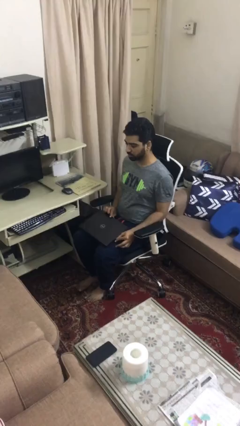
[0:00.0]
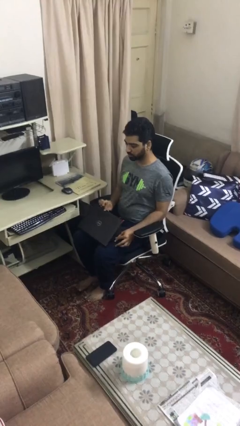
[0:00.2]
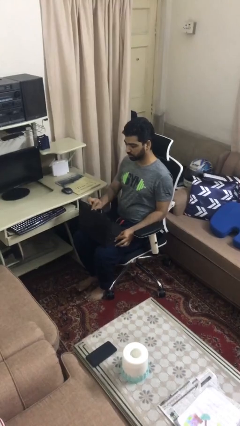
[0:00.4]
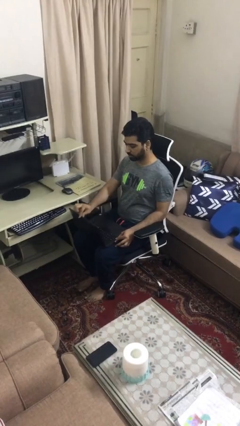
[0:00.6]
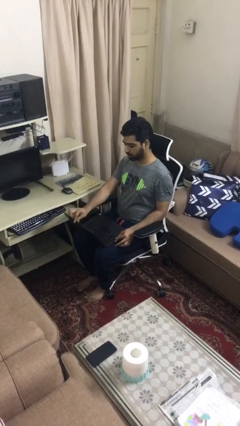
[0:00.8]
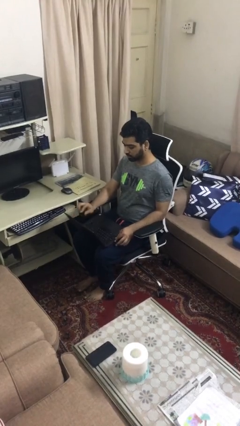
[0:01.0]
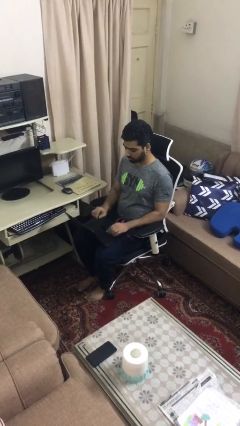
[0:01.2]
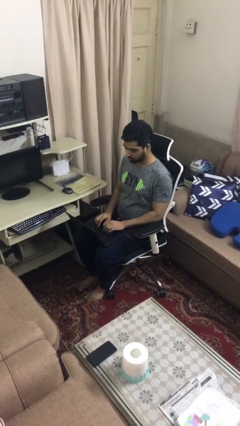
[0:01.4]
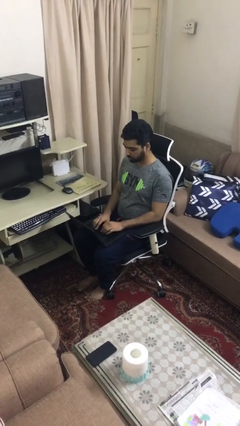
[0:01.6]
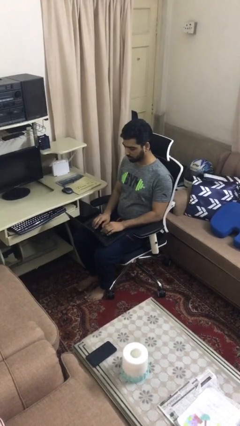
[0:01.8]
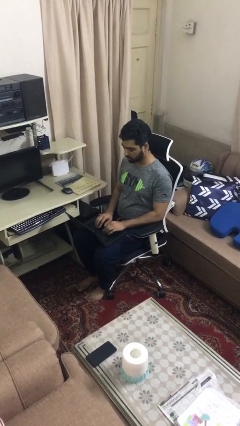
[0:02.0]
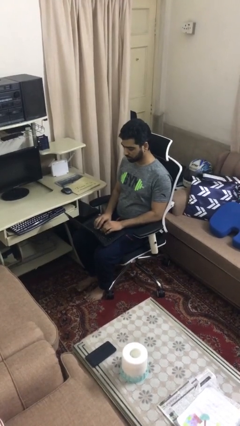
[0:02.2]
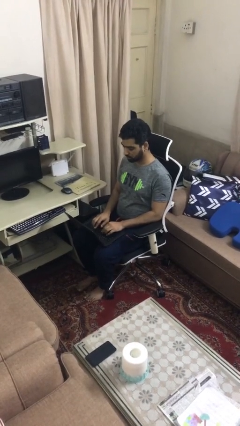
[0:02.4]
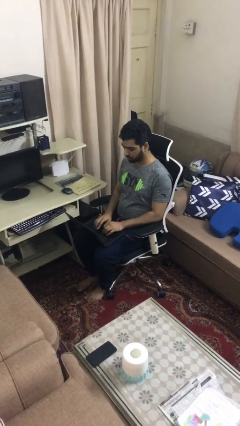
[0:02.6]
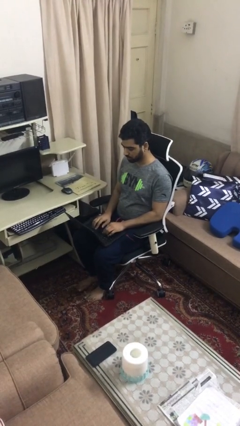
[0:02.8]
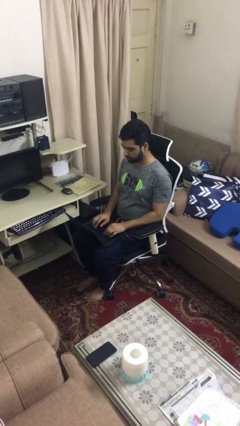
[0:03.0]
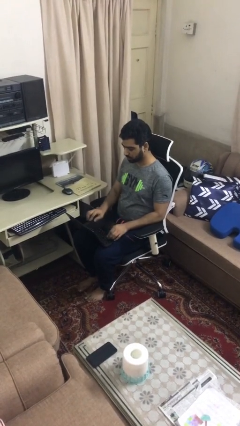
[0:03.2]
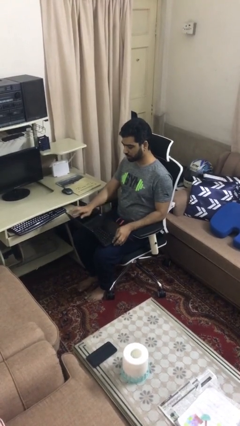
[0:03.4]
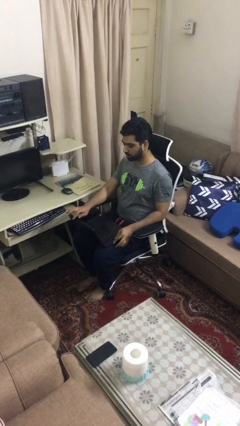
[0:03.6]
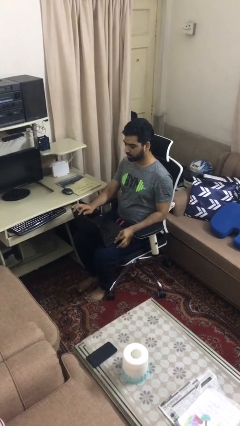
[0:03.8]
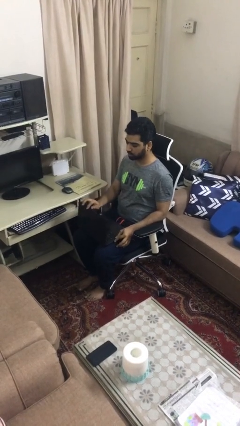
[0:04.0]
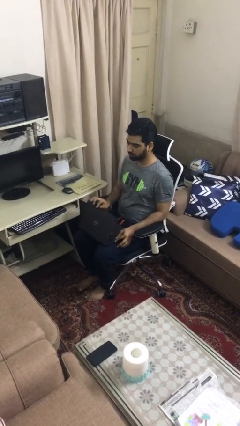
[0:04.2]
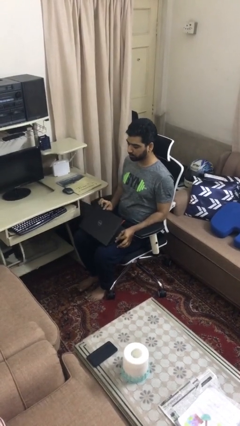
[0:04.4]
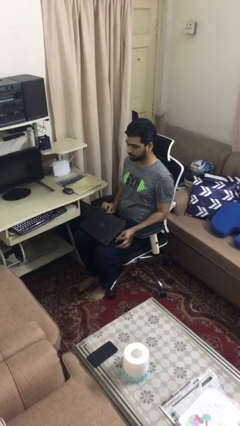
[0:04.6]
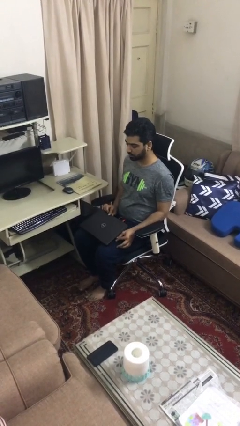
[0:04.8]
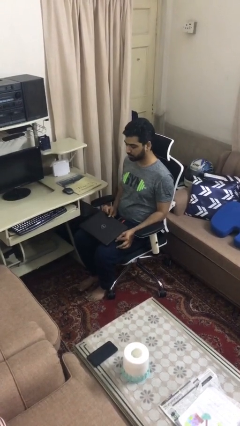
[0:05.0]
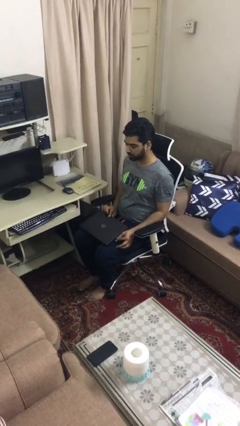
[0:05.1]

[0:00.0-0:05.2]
person interacts with laptop

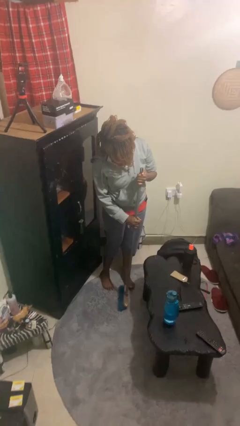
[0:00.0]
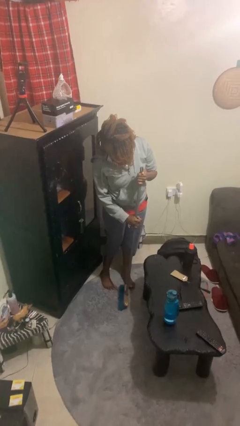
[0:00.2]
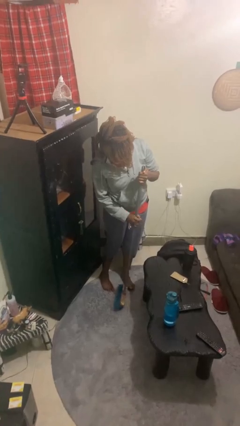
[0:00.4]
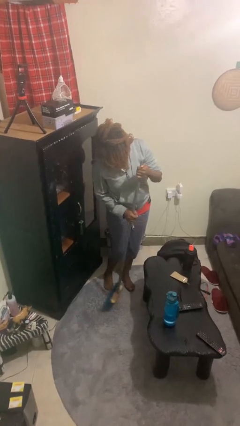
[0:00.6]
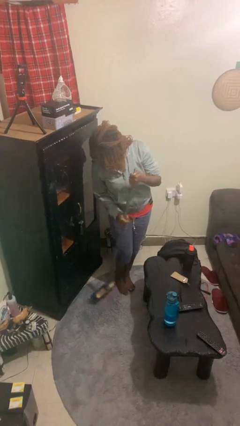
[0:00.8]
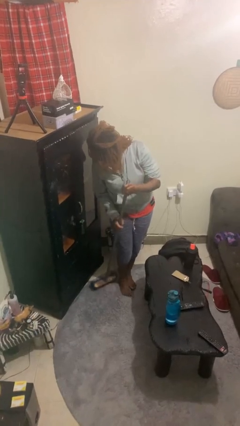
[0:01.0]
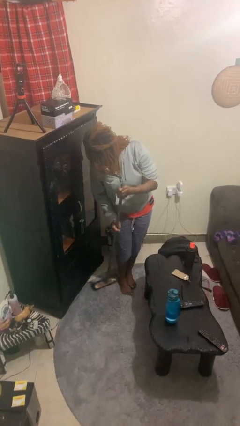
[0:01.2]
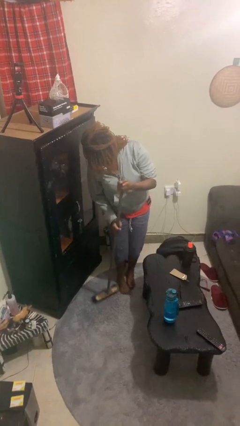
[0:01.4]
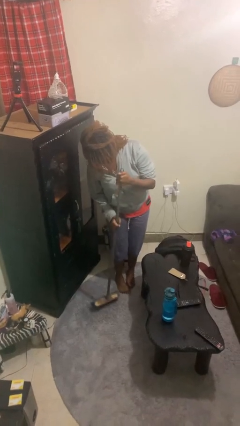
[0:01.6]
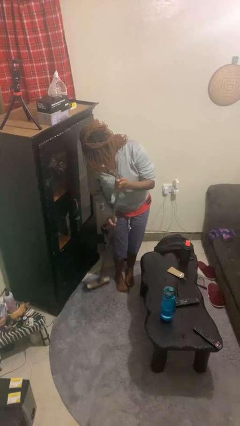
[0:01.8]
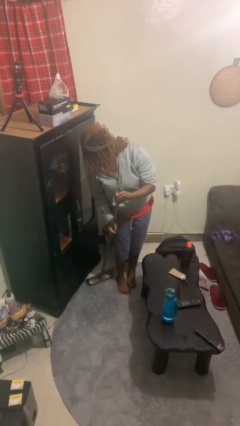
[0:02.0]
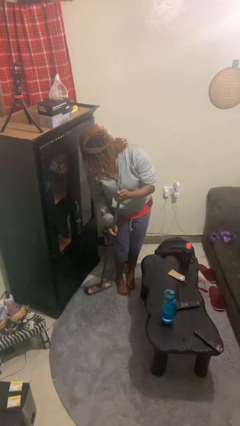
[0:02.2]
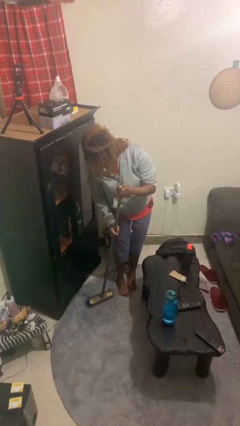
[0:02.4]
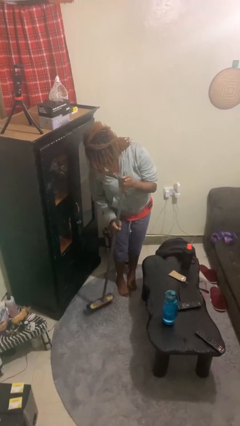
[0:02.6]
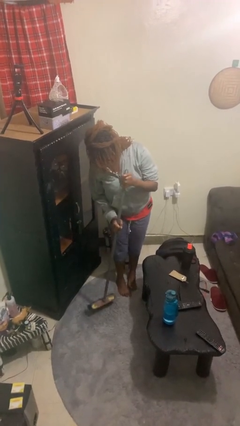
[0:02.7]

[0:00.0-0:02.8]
person sweeps floor

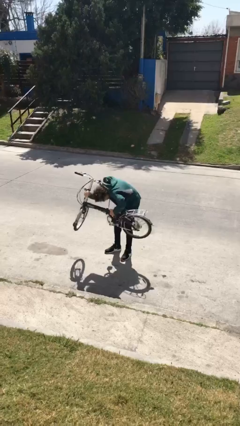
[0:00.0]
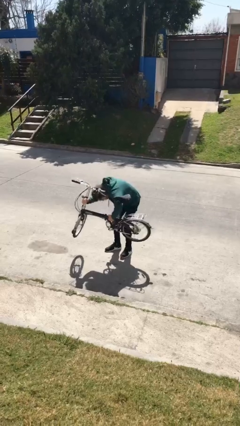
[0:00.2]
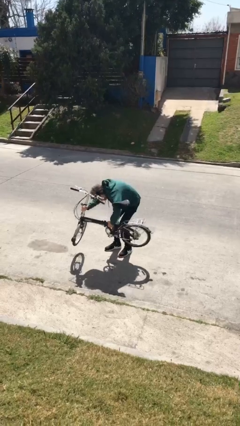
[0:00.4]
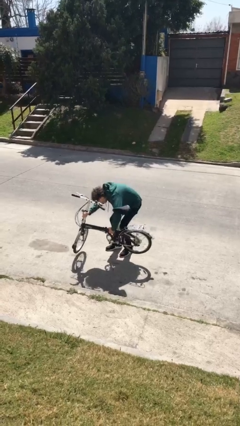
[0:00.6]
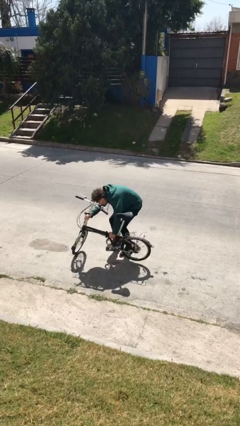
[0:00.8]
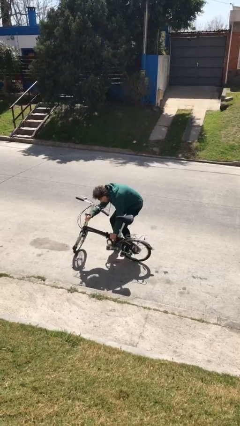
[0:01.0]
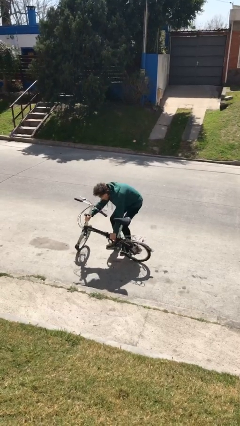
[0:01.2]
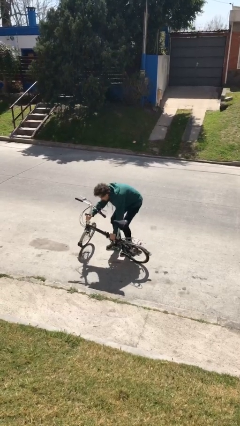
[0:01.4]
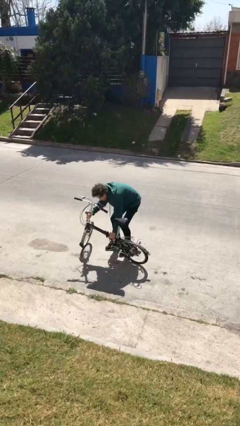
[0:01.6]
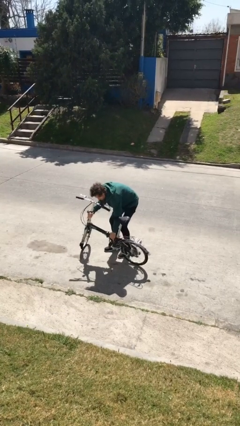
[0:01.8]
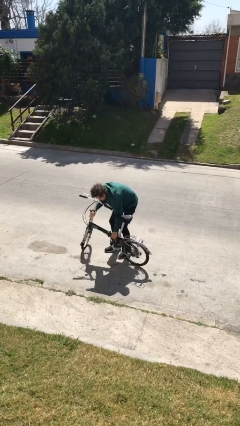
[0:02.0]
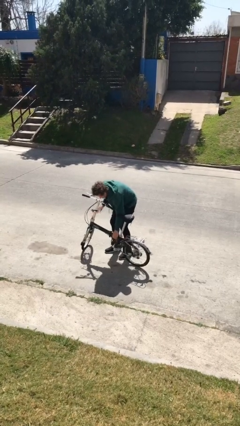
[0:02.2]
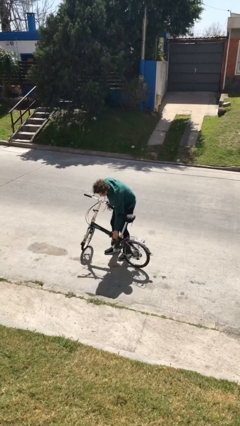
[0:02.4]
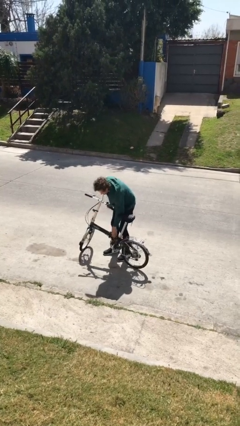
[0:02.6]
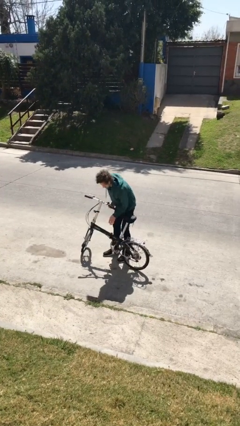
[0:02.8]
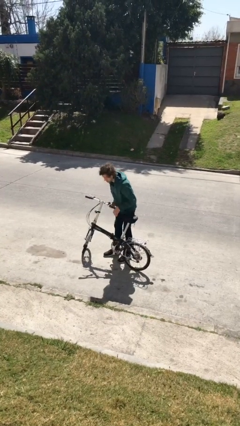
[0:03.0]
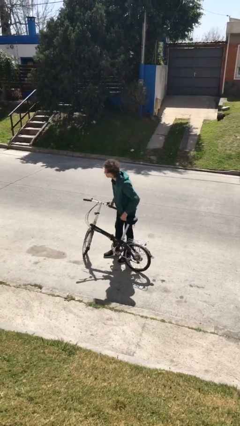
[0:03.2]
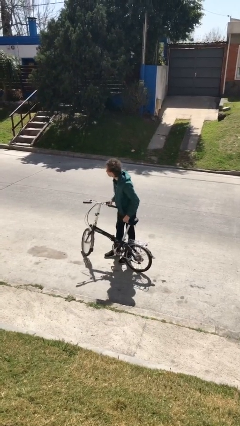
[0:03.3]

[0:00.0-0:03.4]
person puts down object on floor

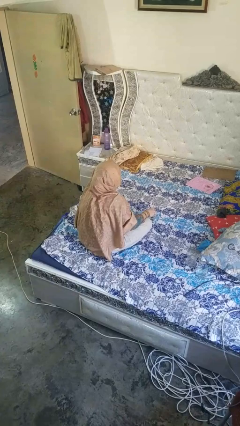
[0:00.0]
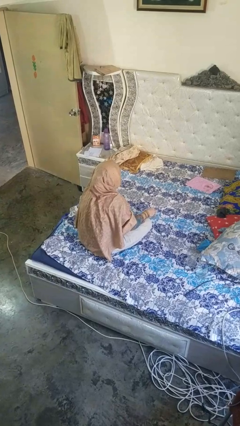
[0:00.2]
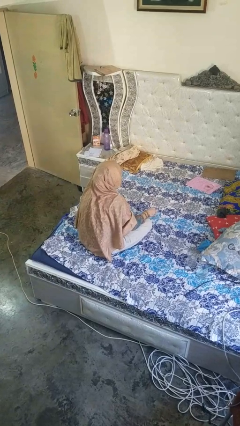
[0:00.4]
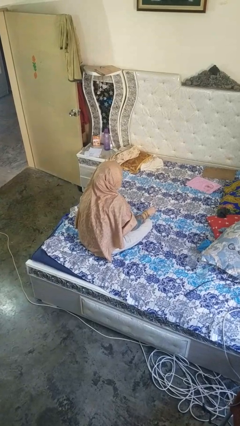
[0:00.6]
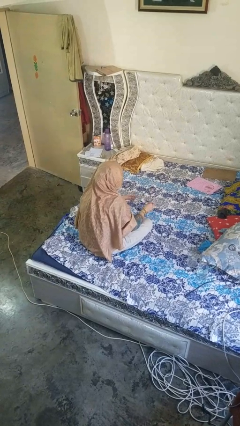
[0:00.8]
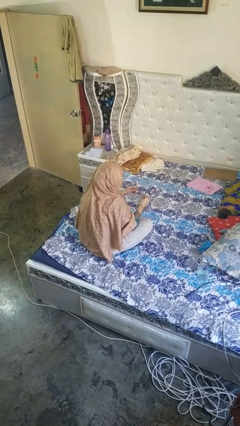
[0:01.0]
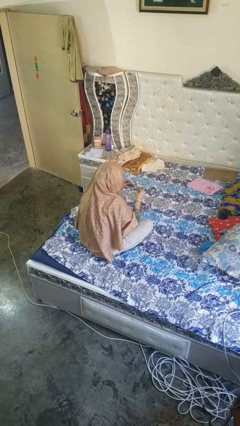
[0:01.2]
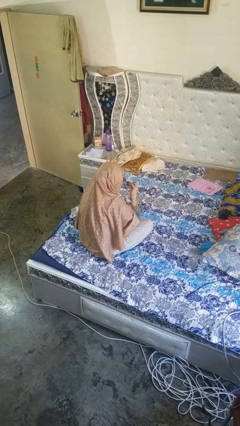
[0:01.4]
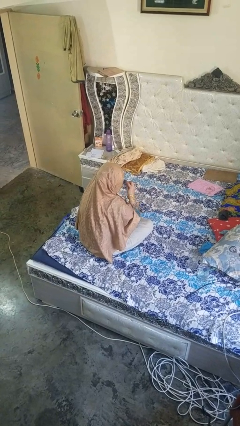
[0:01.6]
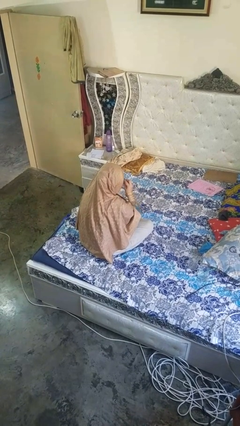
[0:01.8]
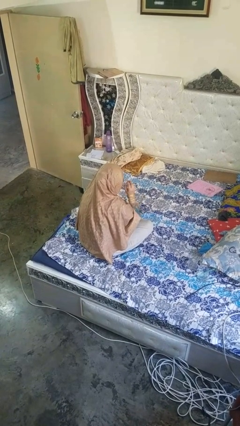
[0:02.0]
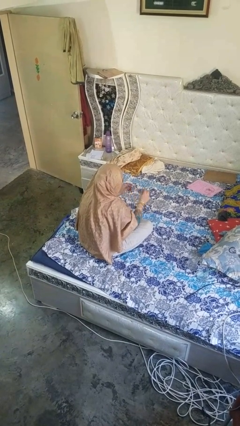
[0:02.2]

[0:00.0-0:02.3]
person puts on glasses

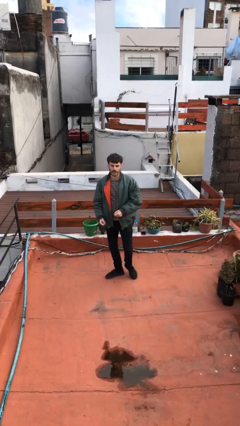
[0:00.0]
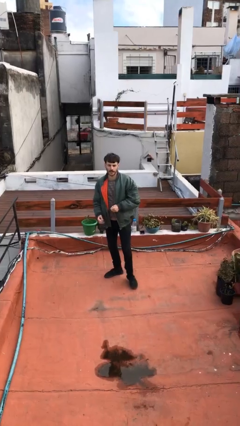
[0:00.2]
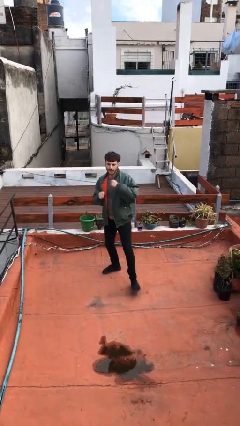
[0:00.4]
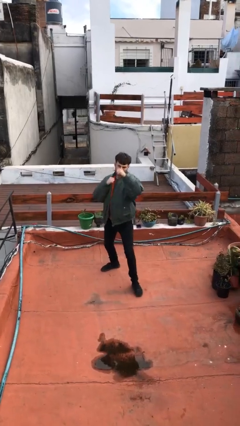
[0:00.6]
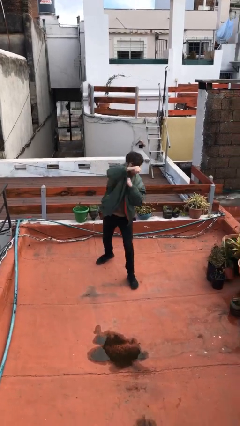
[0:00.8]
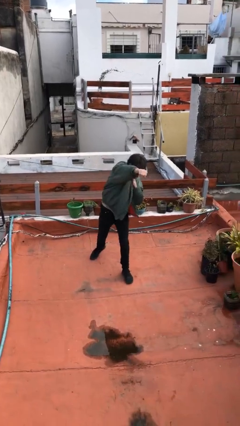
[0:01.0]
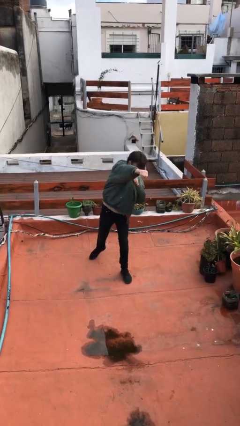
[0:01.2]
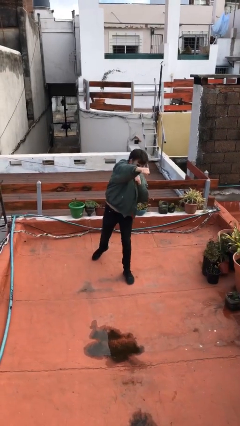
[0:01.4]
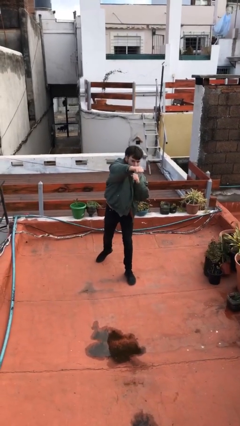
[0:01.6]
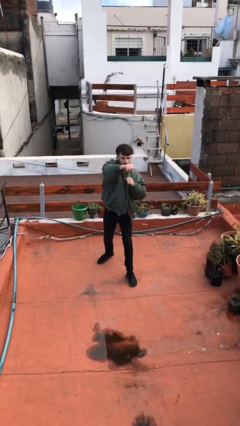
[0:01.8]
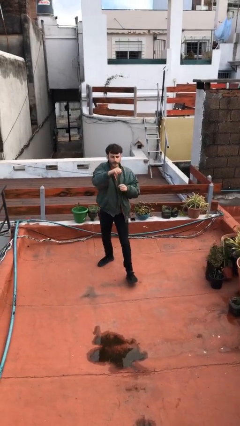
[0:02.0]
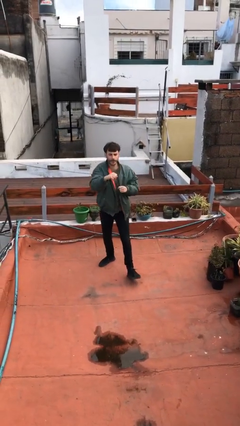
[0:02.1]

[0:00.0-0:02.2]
person punches

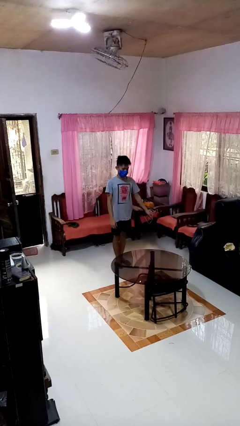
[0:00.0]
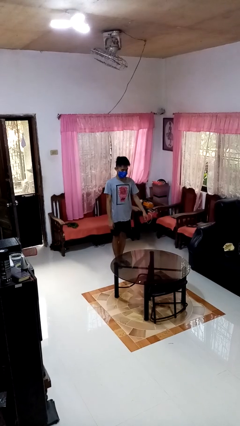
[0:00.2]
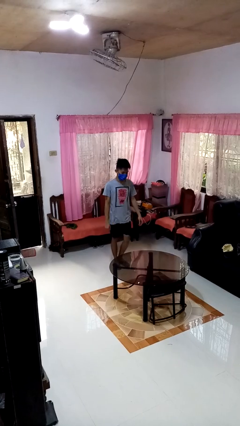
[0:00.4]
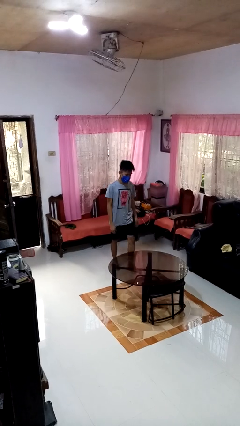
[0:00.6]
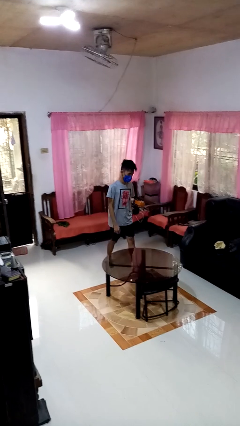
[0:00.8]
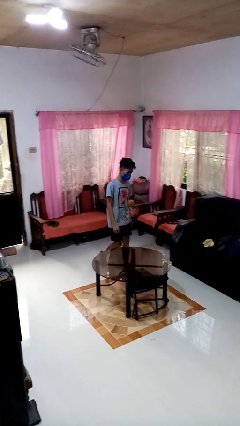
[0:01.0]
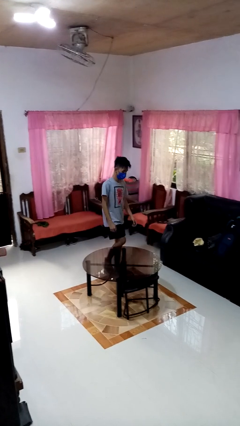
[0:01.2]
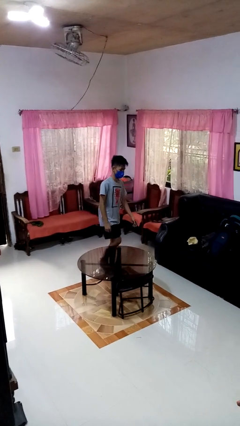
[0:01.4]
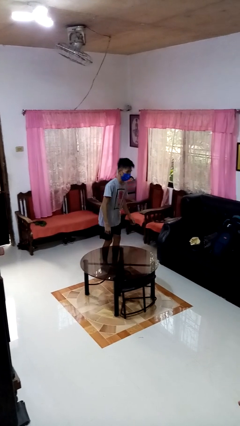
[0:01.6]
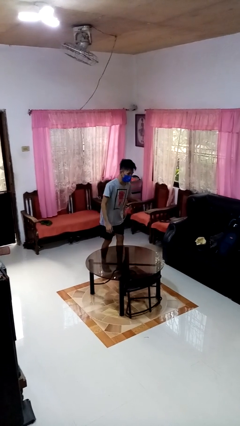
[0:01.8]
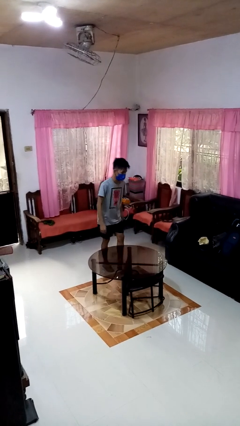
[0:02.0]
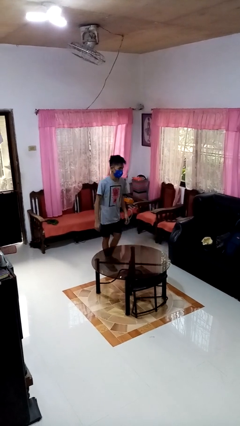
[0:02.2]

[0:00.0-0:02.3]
person bumps into table
